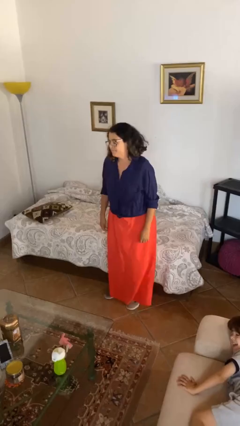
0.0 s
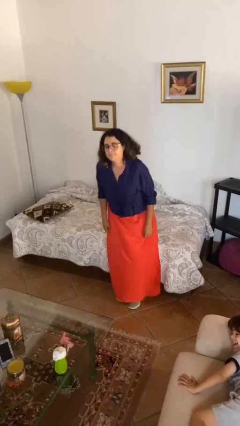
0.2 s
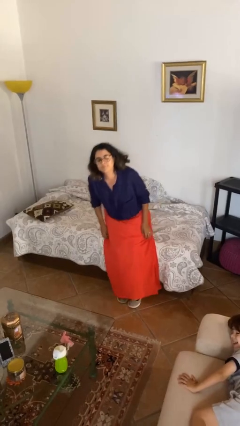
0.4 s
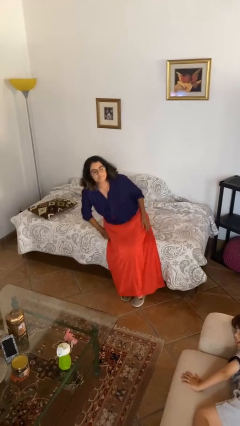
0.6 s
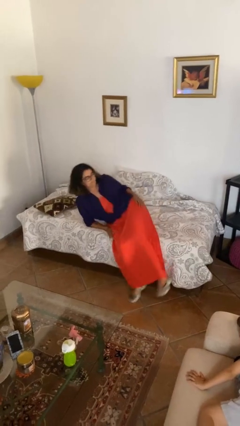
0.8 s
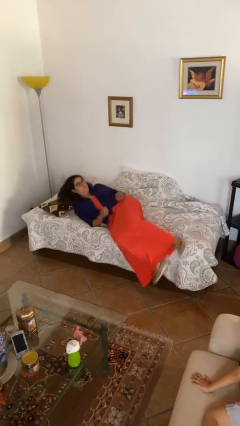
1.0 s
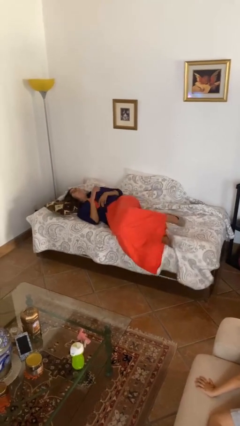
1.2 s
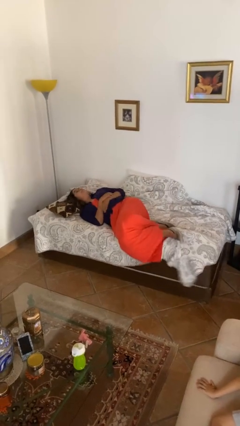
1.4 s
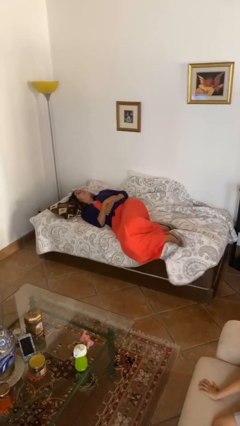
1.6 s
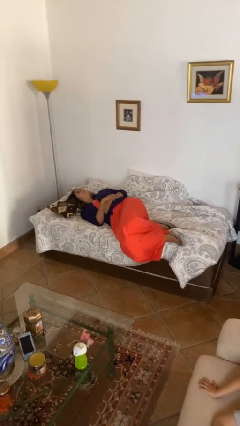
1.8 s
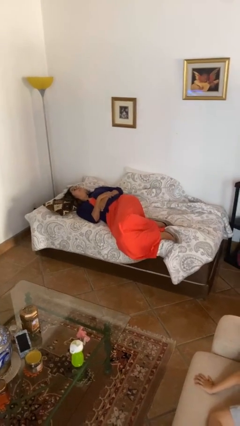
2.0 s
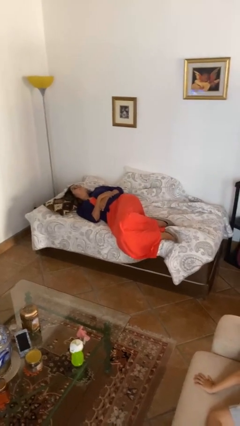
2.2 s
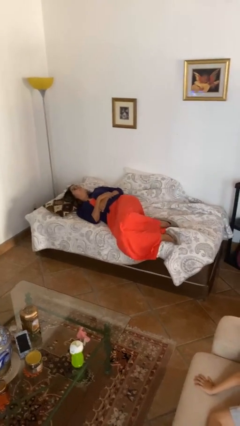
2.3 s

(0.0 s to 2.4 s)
person lies down on bed

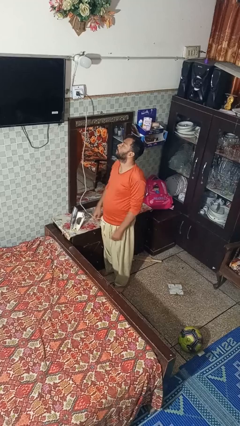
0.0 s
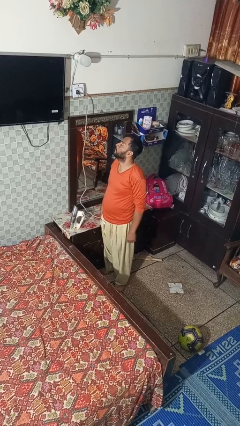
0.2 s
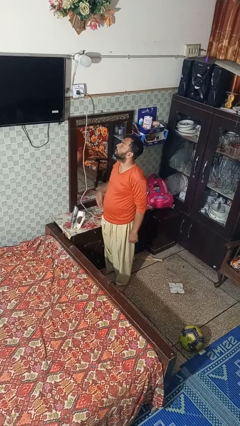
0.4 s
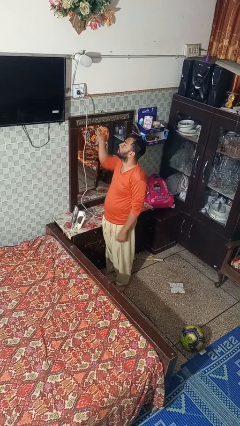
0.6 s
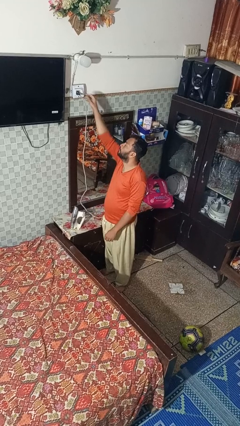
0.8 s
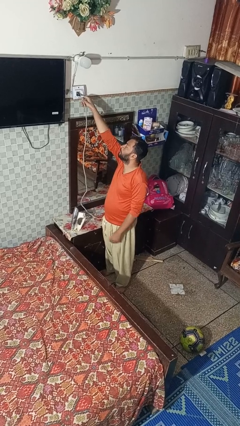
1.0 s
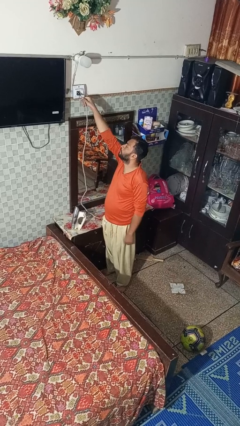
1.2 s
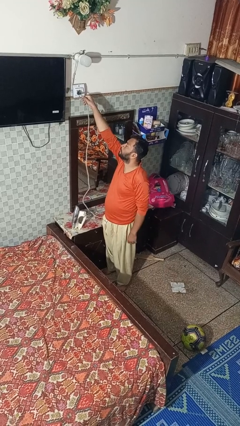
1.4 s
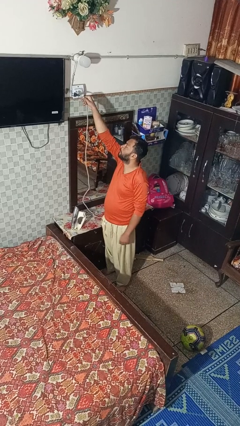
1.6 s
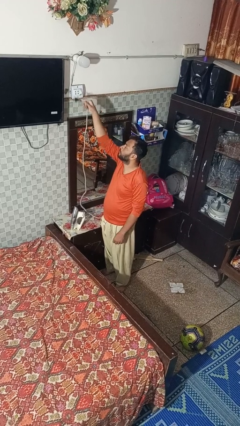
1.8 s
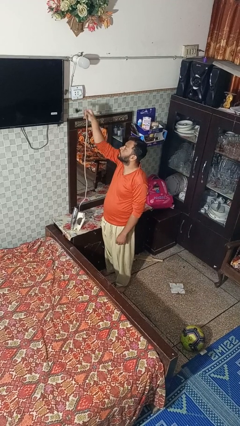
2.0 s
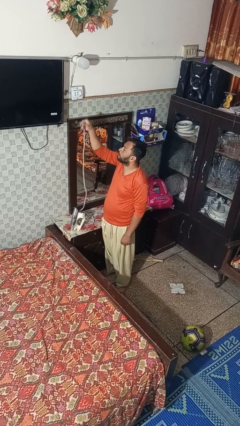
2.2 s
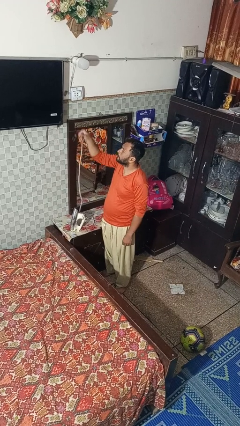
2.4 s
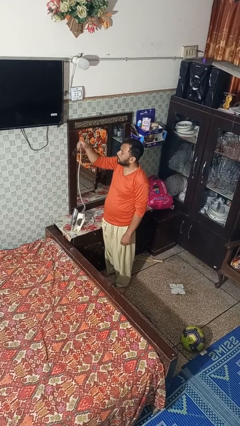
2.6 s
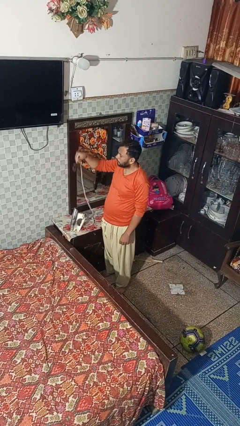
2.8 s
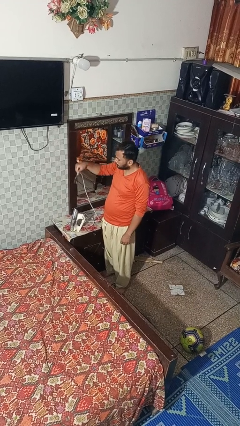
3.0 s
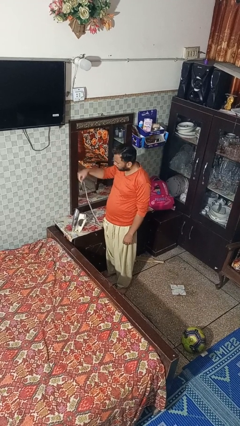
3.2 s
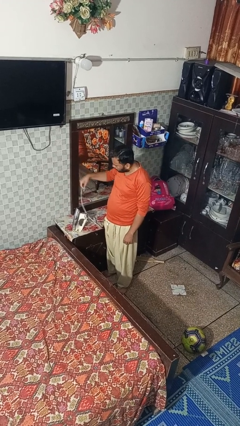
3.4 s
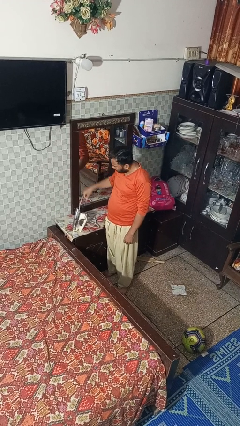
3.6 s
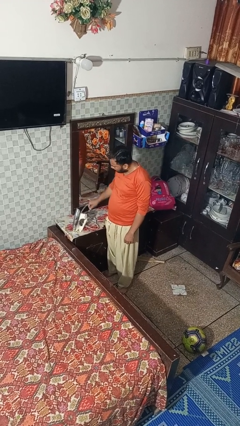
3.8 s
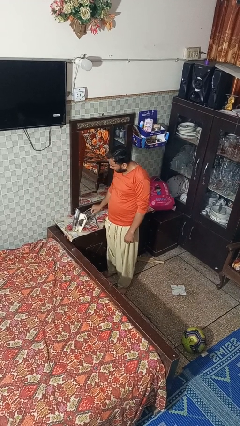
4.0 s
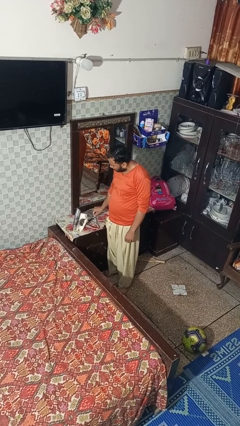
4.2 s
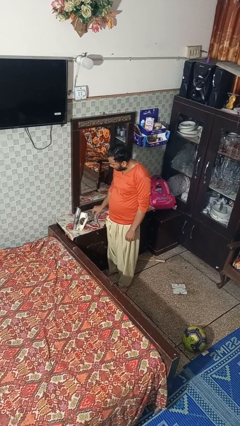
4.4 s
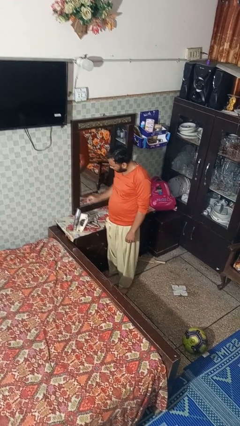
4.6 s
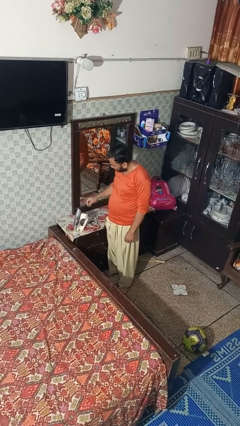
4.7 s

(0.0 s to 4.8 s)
person unplugs from electrical socket

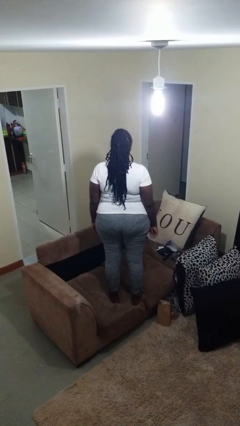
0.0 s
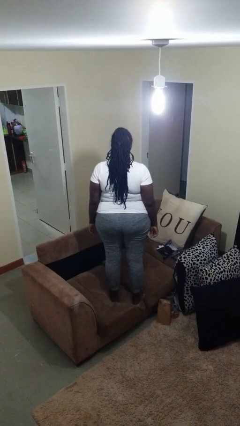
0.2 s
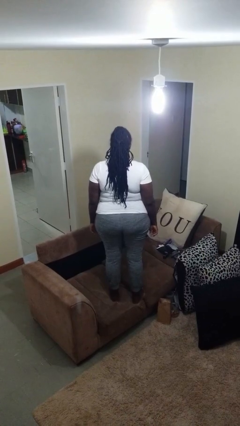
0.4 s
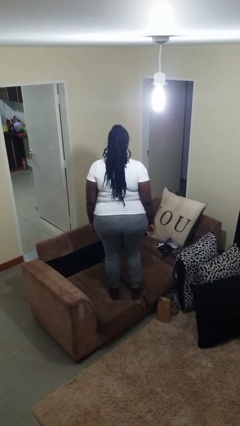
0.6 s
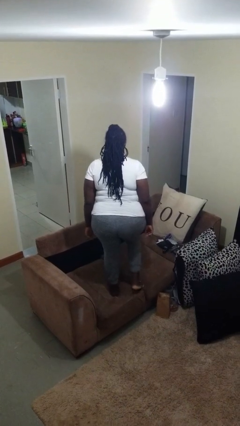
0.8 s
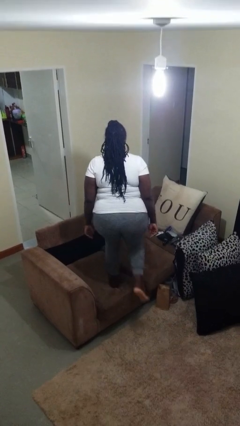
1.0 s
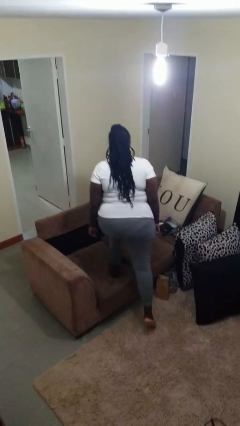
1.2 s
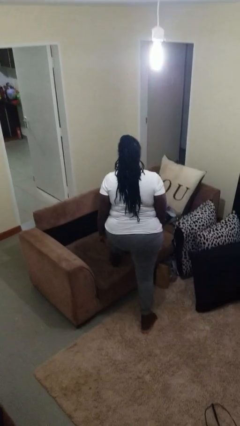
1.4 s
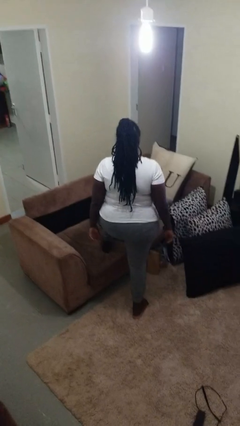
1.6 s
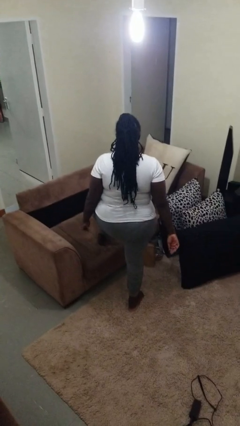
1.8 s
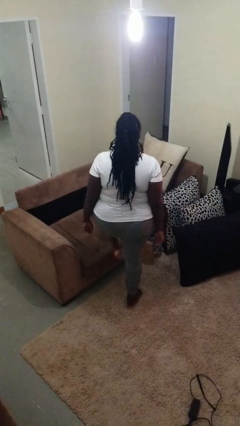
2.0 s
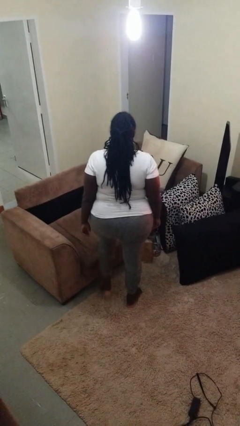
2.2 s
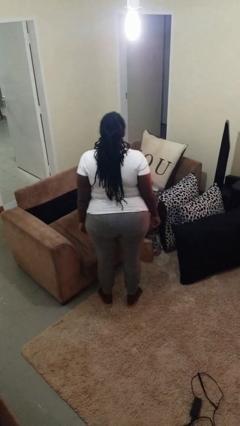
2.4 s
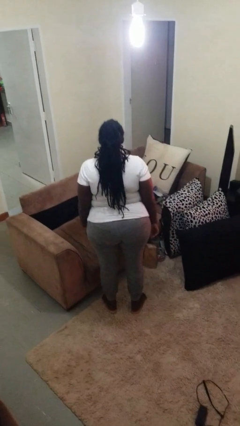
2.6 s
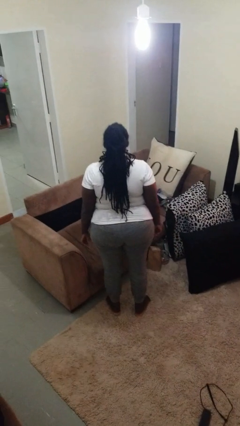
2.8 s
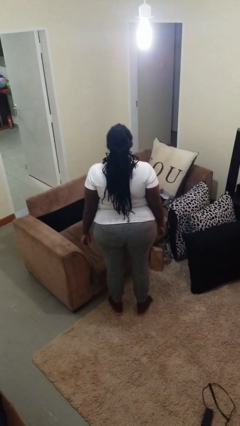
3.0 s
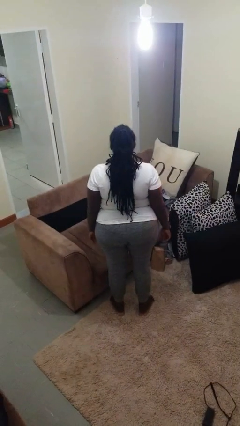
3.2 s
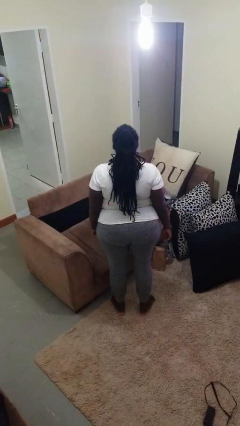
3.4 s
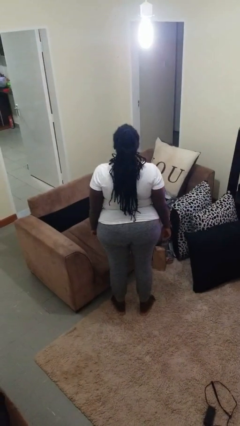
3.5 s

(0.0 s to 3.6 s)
person climbs off couch

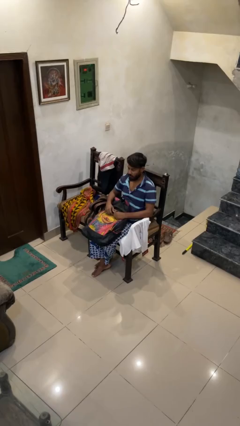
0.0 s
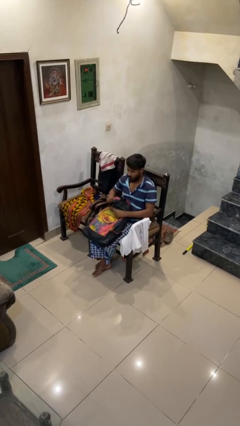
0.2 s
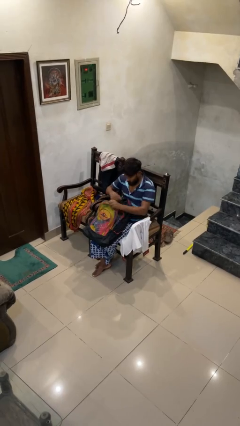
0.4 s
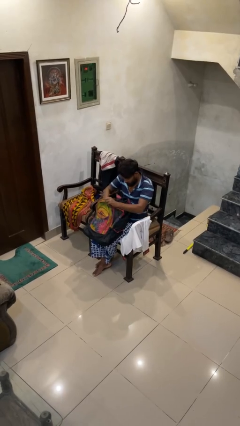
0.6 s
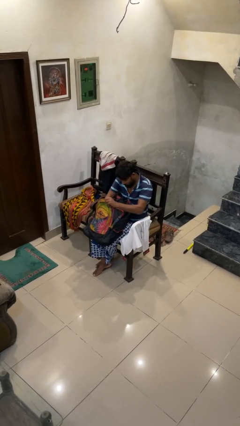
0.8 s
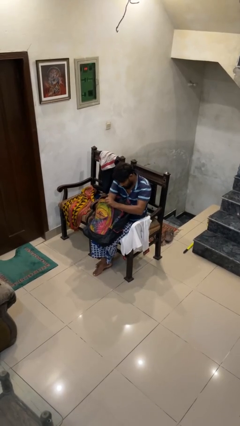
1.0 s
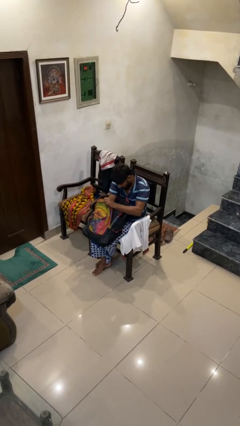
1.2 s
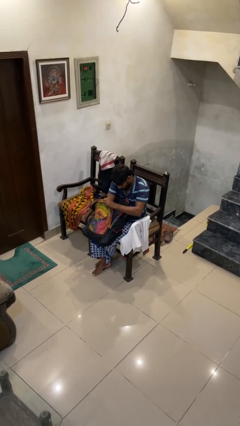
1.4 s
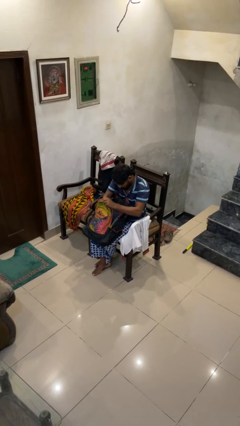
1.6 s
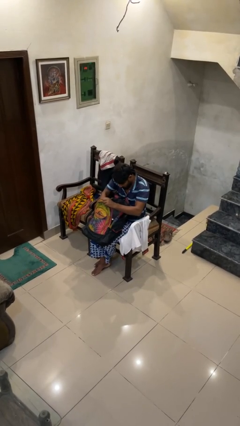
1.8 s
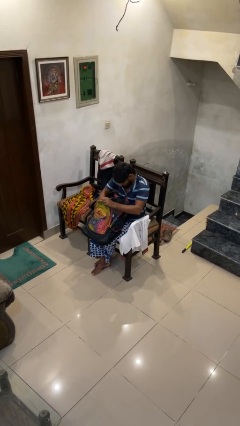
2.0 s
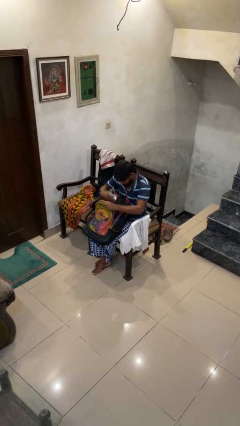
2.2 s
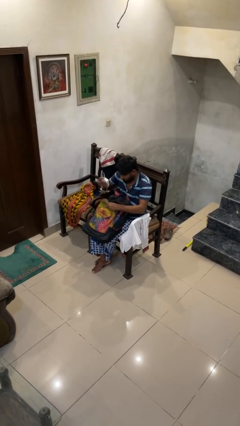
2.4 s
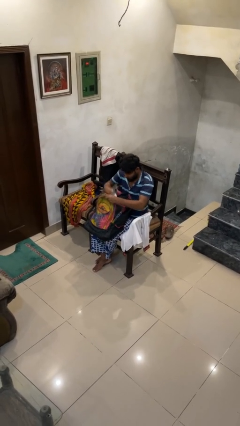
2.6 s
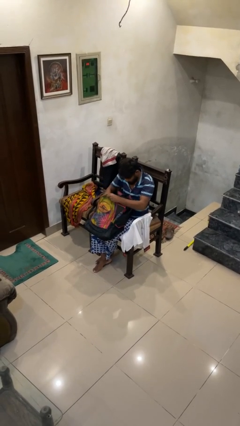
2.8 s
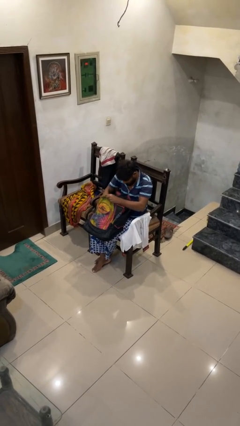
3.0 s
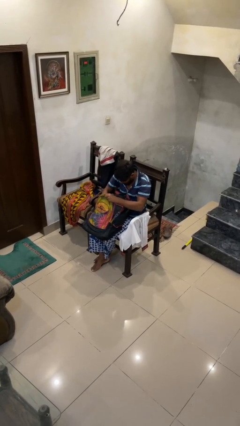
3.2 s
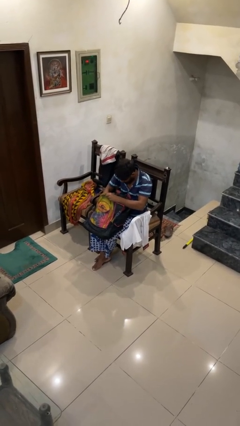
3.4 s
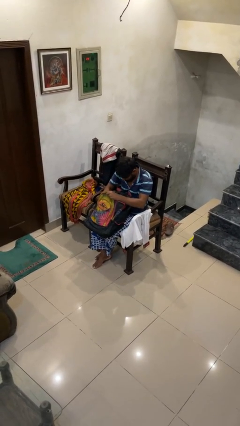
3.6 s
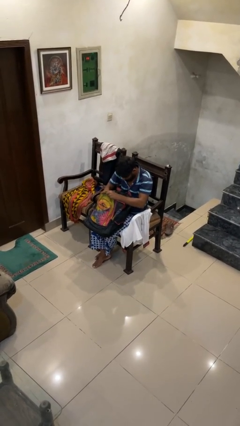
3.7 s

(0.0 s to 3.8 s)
person searches in backpack

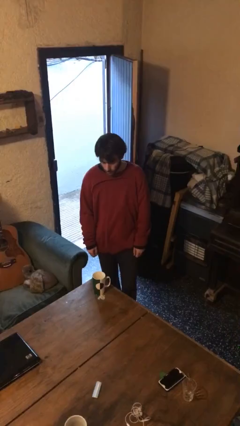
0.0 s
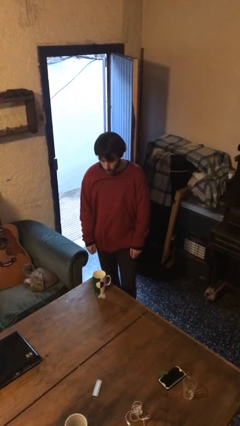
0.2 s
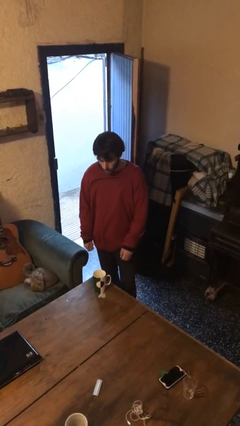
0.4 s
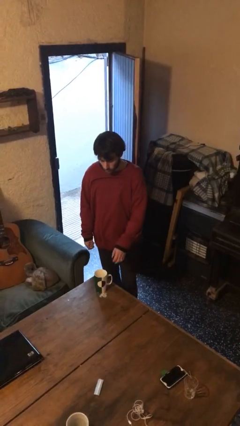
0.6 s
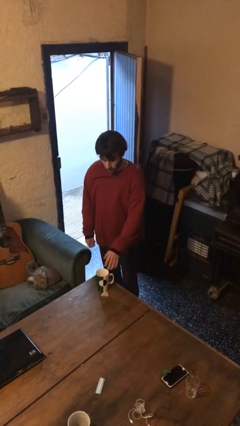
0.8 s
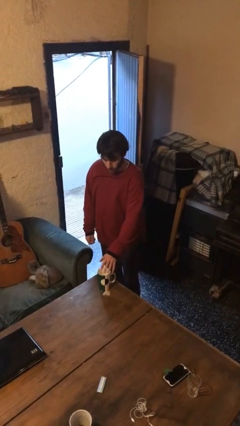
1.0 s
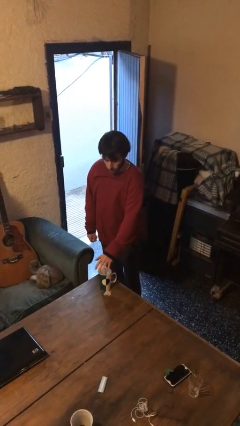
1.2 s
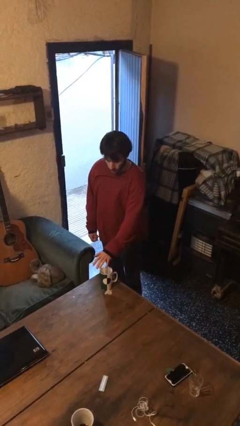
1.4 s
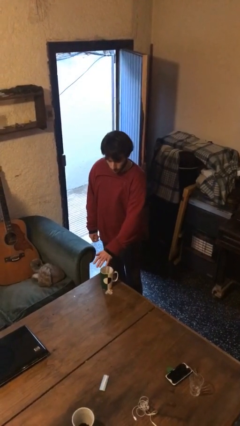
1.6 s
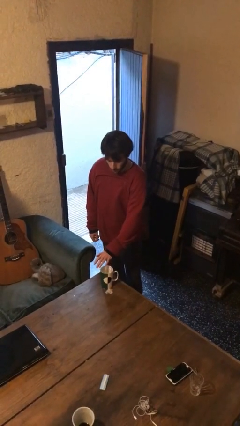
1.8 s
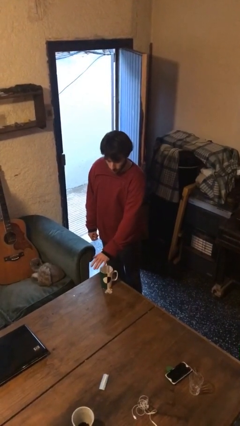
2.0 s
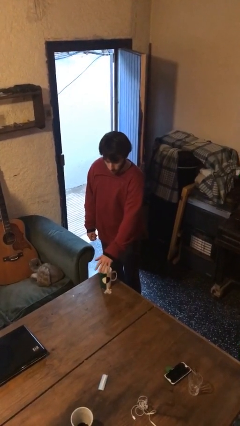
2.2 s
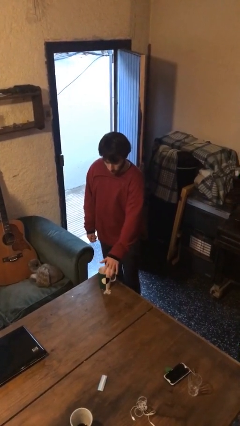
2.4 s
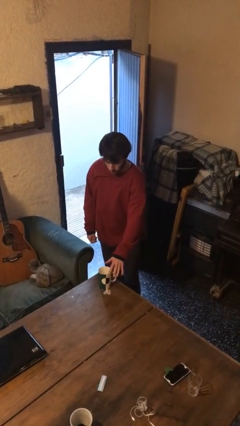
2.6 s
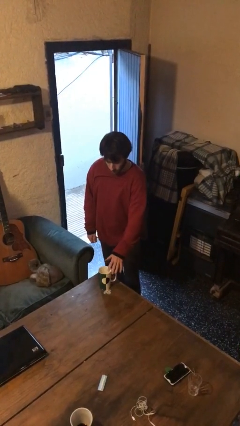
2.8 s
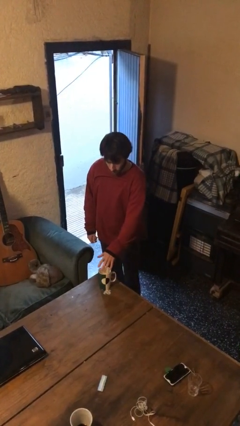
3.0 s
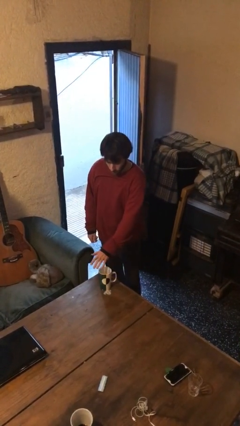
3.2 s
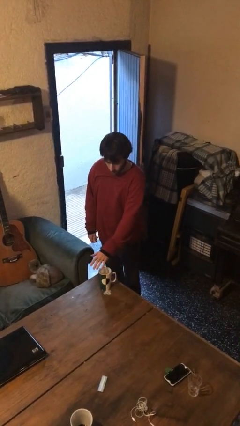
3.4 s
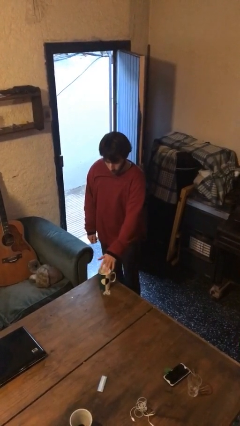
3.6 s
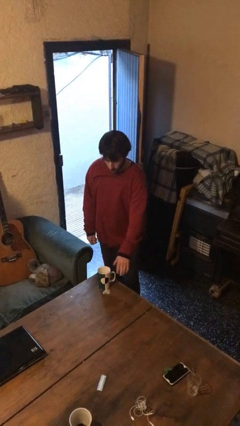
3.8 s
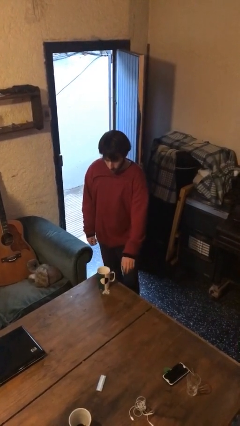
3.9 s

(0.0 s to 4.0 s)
person waves hand over object
